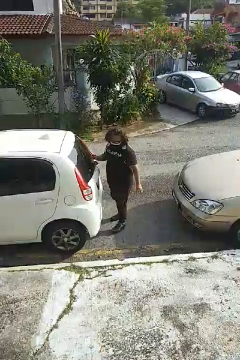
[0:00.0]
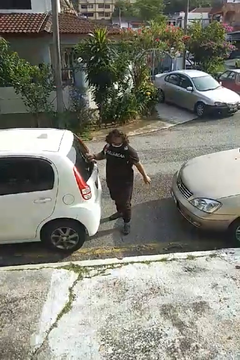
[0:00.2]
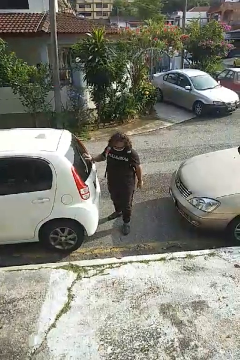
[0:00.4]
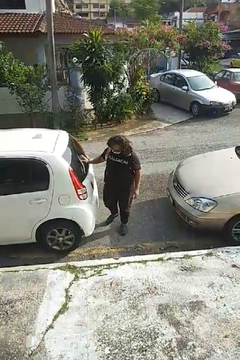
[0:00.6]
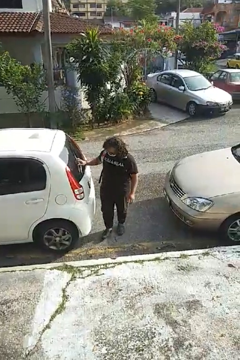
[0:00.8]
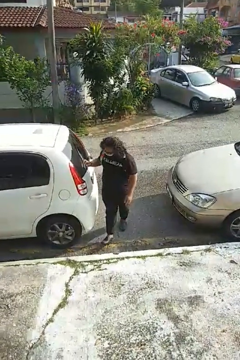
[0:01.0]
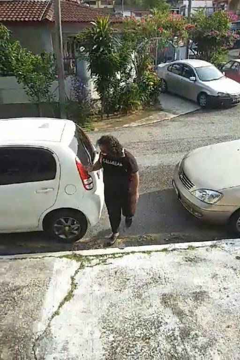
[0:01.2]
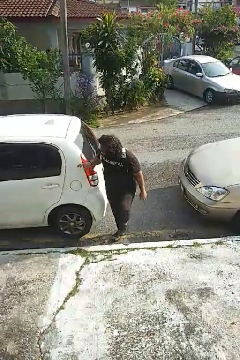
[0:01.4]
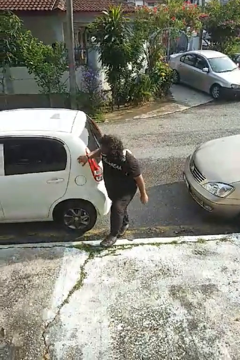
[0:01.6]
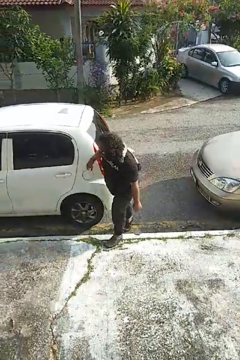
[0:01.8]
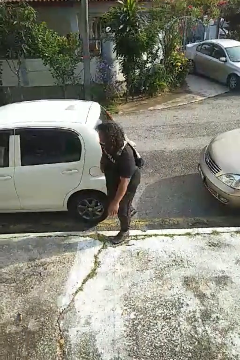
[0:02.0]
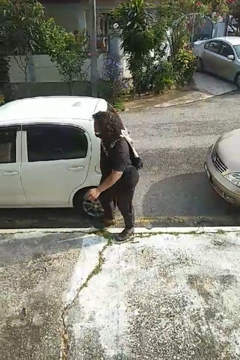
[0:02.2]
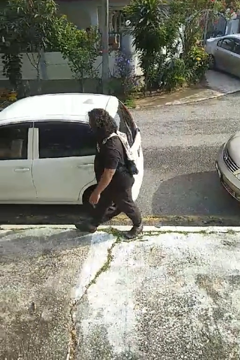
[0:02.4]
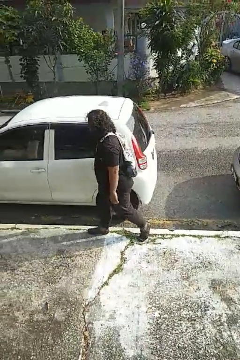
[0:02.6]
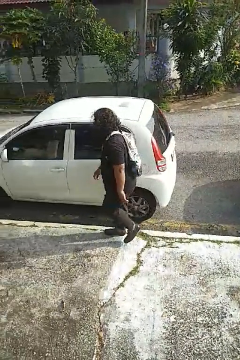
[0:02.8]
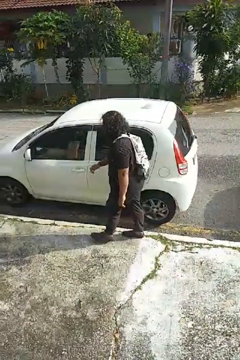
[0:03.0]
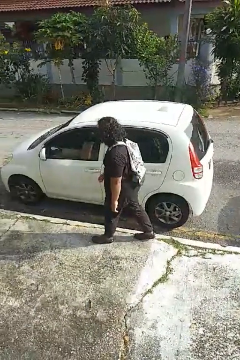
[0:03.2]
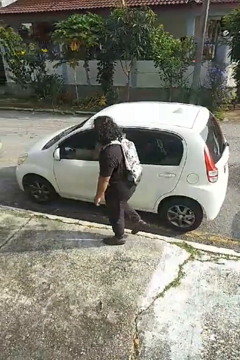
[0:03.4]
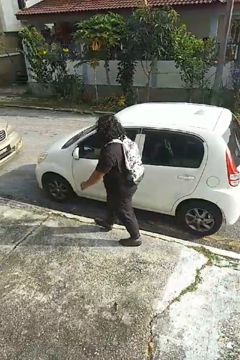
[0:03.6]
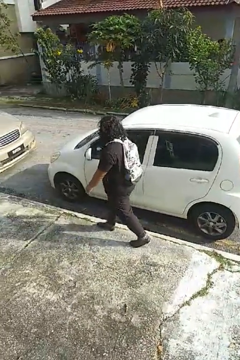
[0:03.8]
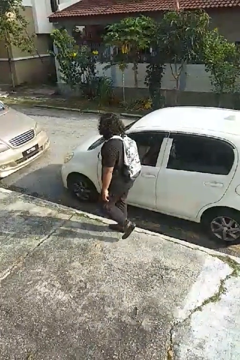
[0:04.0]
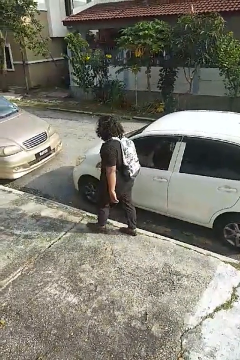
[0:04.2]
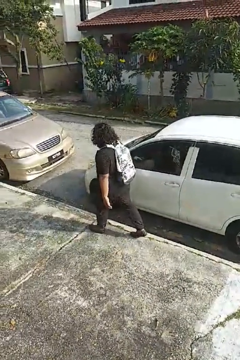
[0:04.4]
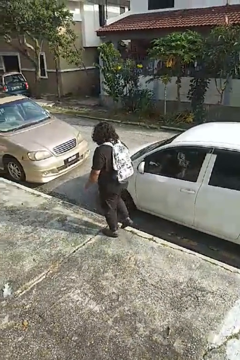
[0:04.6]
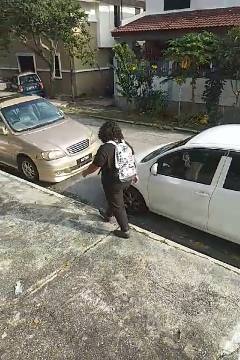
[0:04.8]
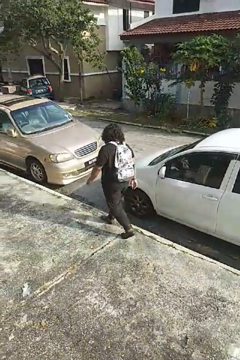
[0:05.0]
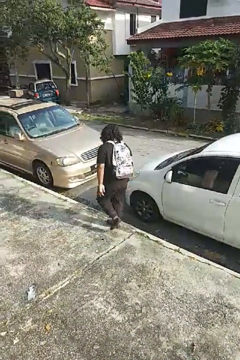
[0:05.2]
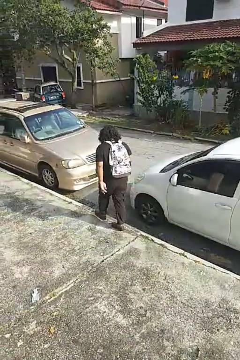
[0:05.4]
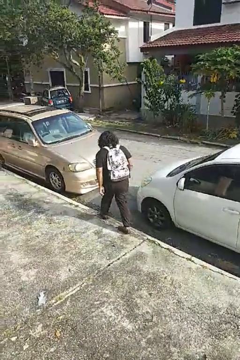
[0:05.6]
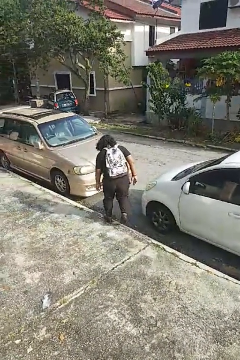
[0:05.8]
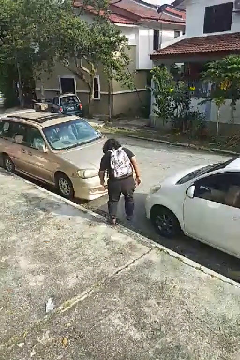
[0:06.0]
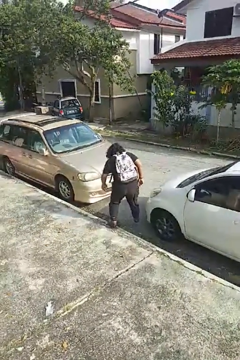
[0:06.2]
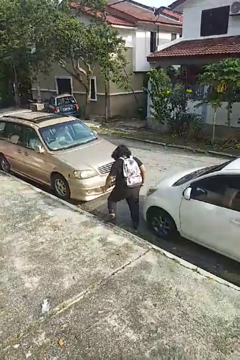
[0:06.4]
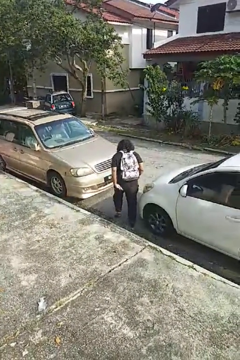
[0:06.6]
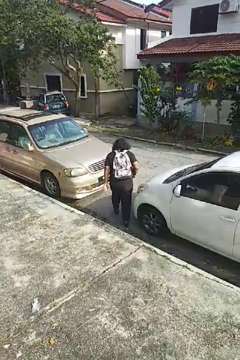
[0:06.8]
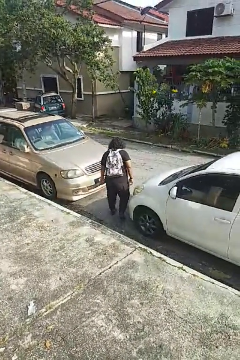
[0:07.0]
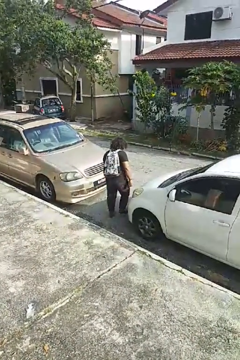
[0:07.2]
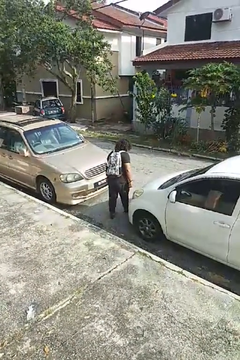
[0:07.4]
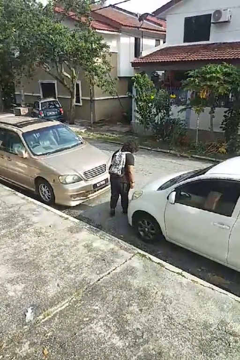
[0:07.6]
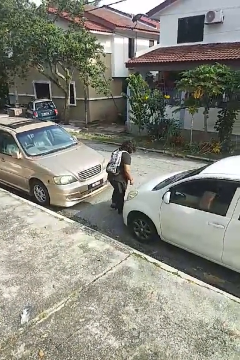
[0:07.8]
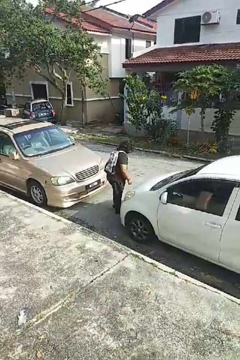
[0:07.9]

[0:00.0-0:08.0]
person walks around car

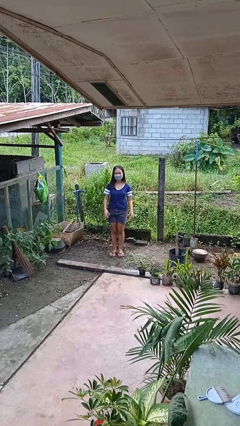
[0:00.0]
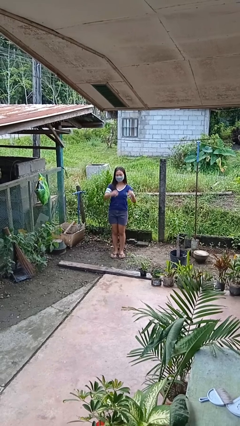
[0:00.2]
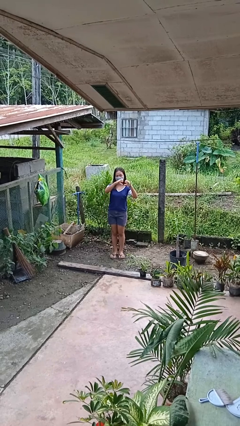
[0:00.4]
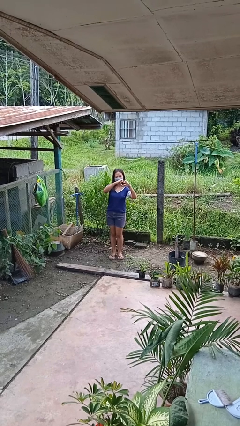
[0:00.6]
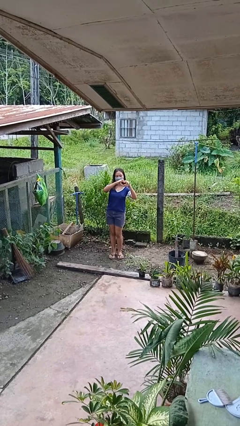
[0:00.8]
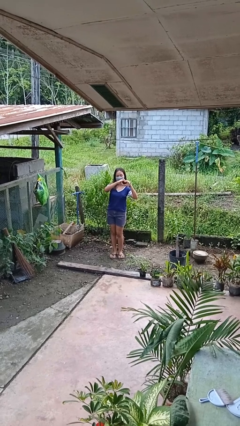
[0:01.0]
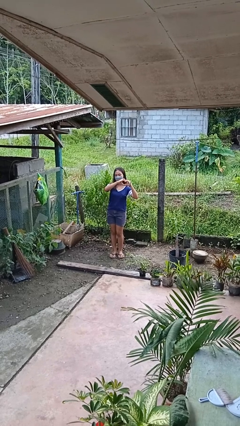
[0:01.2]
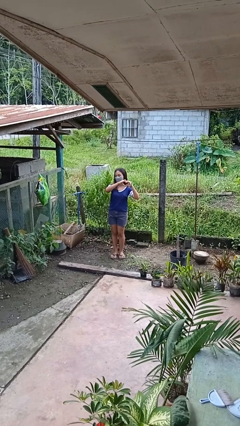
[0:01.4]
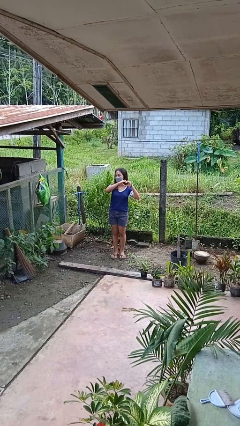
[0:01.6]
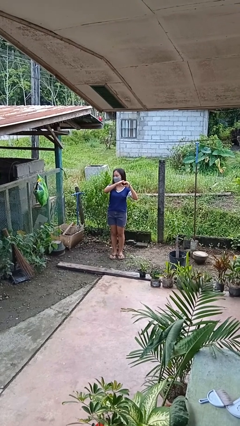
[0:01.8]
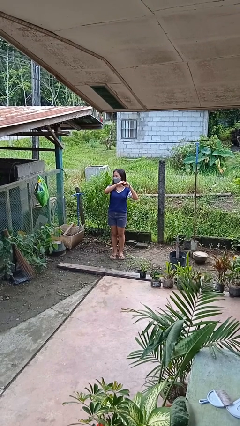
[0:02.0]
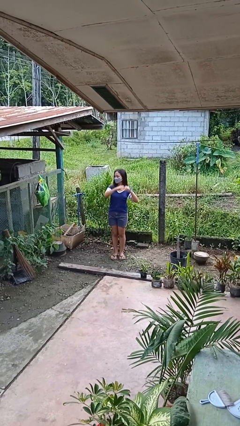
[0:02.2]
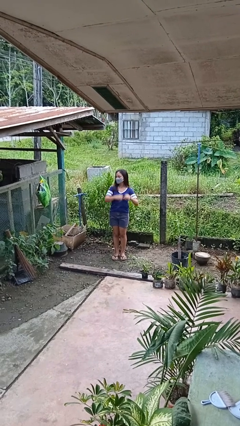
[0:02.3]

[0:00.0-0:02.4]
person gestures heart

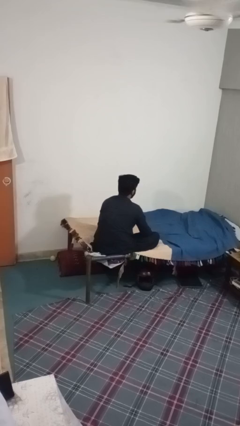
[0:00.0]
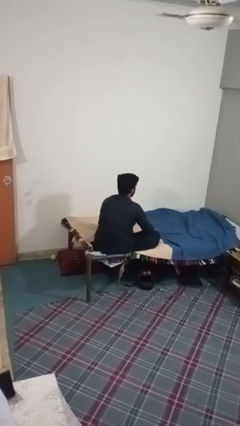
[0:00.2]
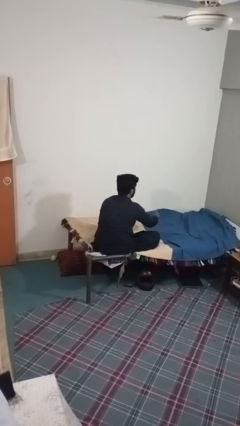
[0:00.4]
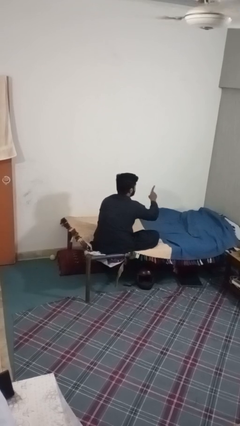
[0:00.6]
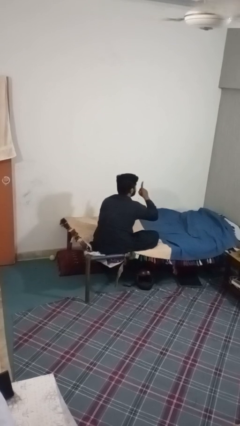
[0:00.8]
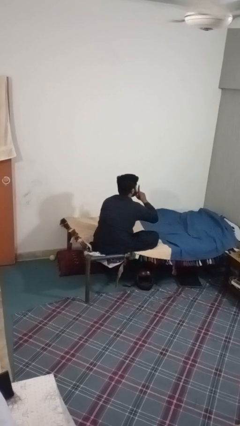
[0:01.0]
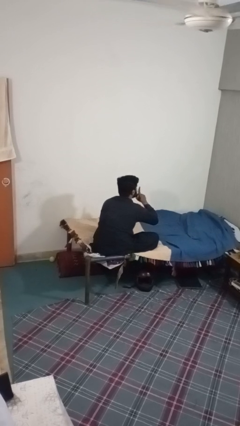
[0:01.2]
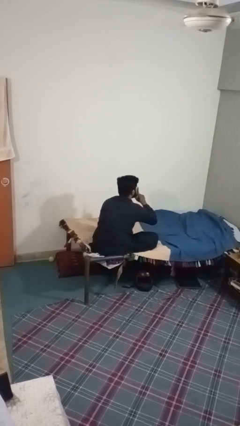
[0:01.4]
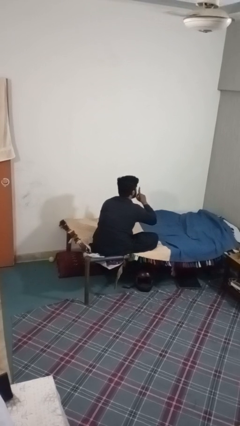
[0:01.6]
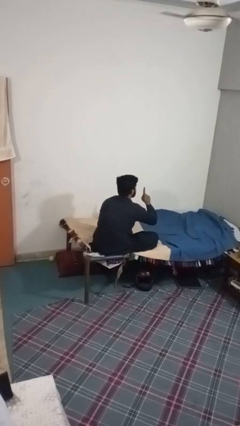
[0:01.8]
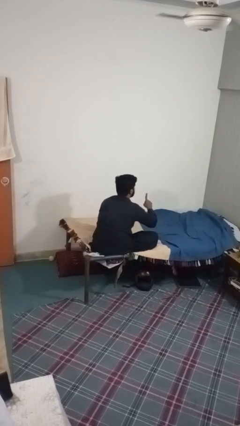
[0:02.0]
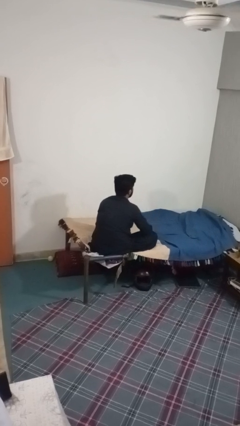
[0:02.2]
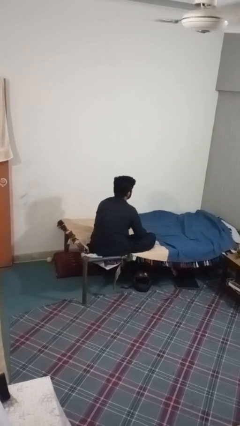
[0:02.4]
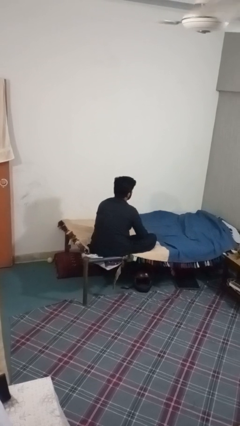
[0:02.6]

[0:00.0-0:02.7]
person gestures be quiet

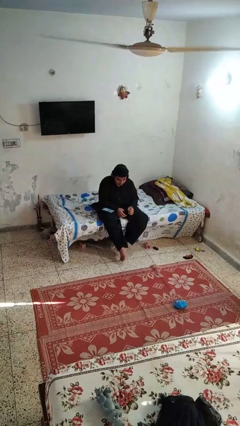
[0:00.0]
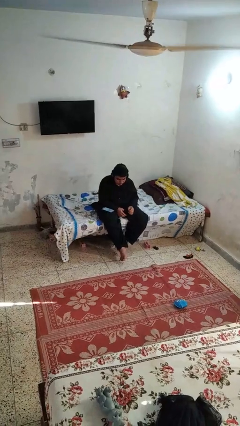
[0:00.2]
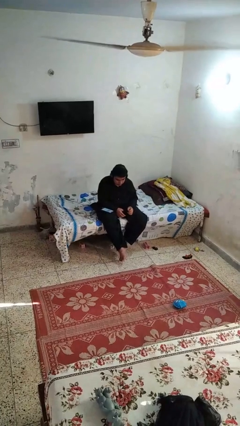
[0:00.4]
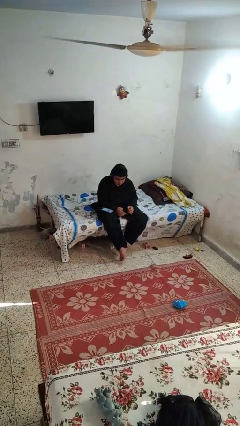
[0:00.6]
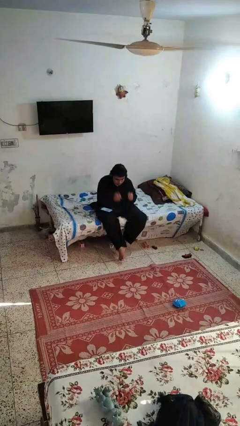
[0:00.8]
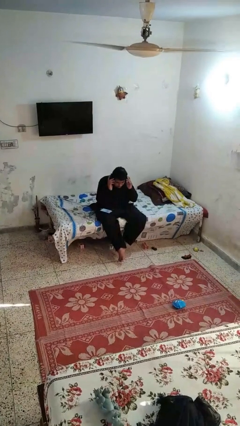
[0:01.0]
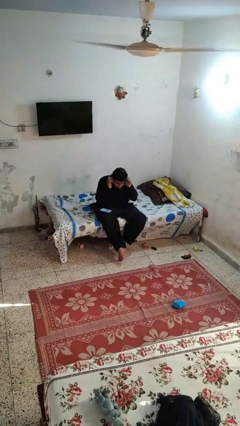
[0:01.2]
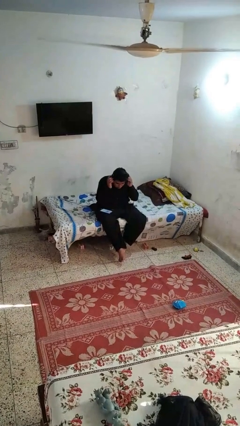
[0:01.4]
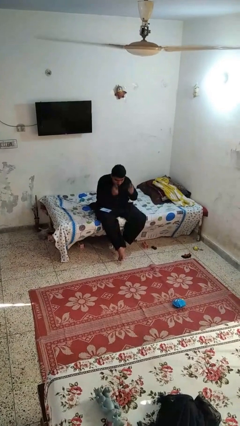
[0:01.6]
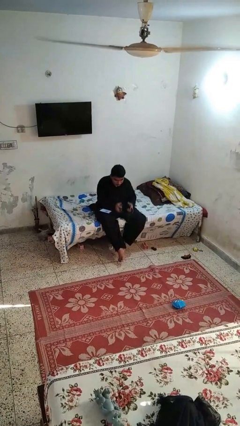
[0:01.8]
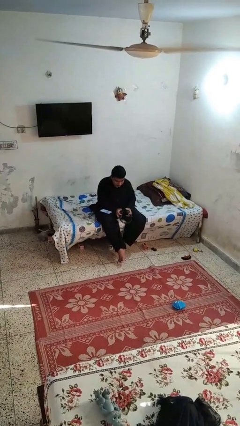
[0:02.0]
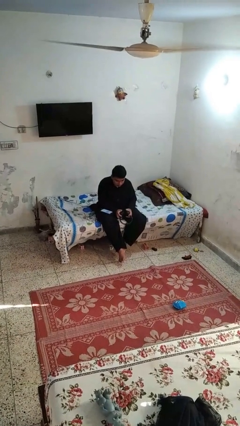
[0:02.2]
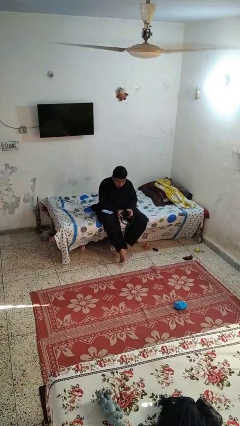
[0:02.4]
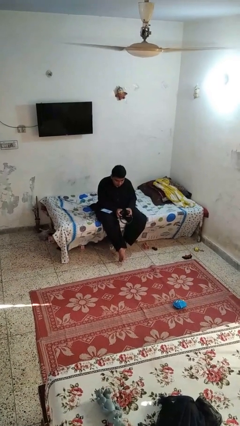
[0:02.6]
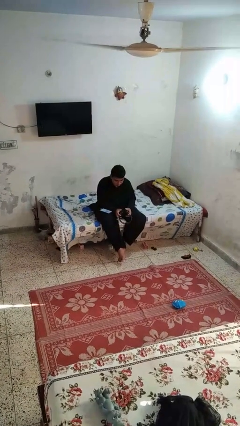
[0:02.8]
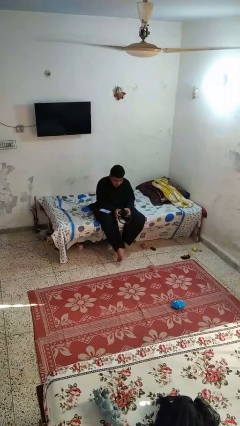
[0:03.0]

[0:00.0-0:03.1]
person takes off headphones

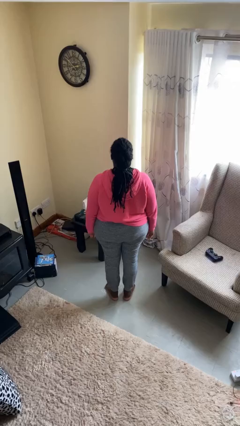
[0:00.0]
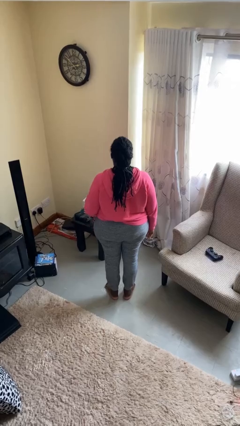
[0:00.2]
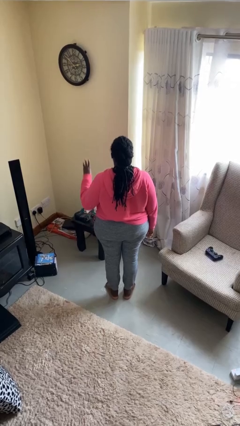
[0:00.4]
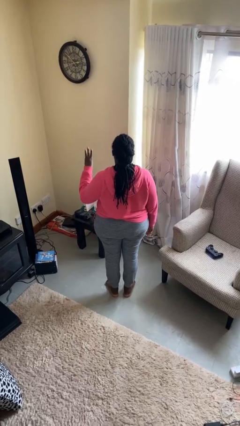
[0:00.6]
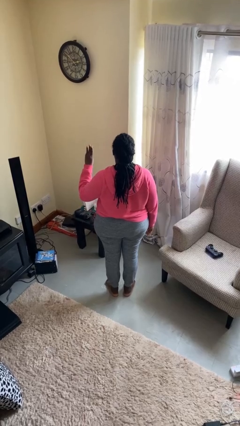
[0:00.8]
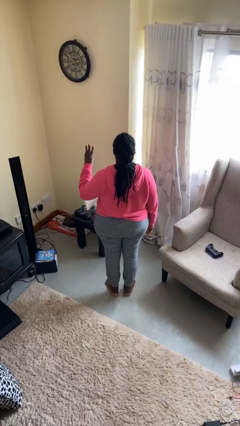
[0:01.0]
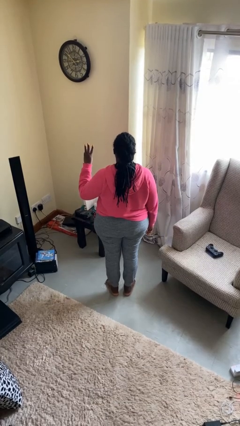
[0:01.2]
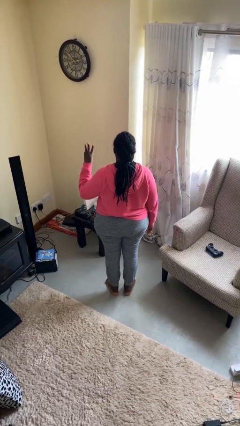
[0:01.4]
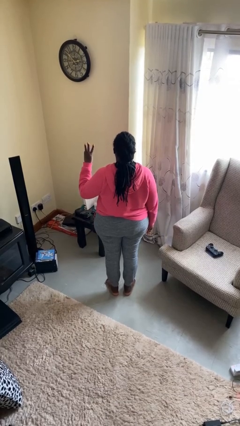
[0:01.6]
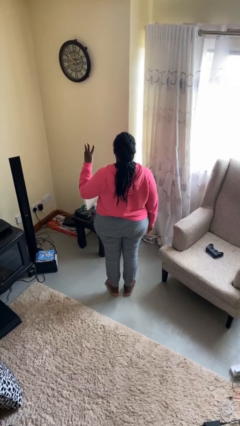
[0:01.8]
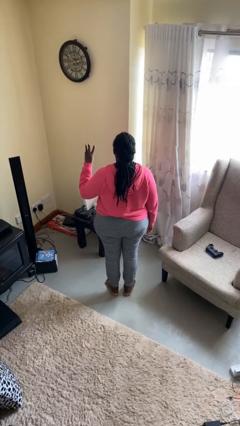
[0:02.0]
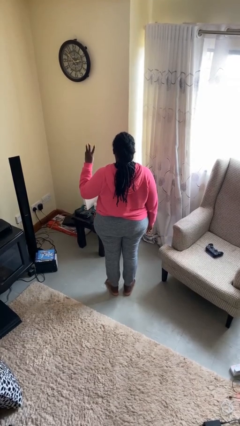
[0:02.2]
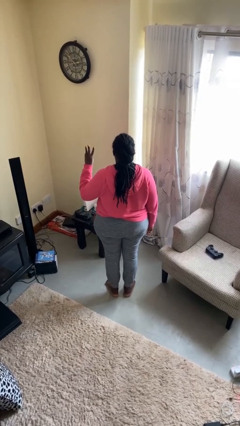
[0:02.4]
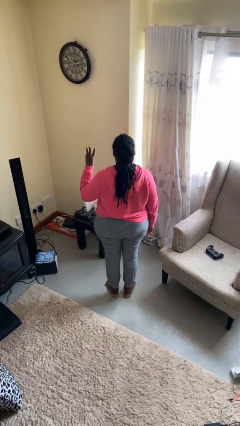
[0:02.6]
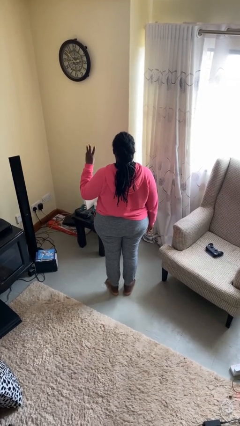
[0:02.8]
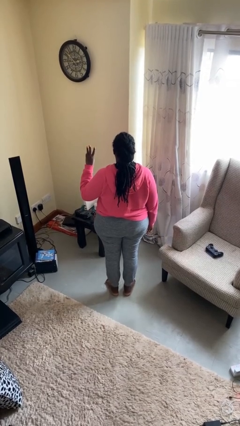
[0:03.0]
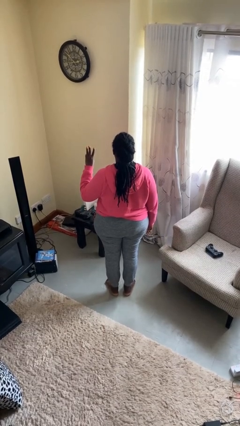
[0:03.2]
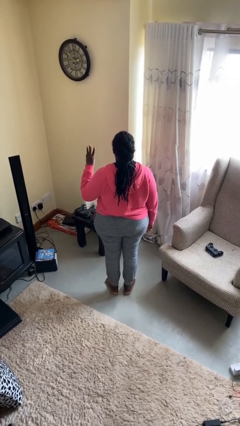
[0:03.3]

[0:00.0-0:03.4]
person gestures number three
